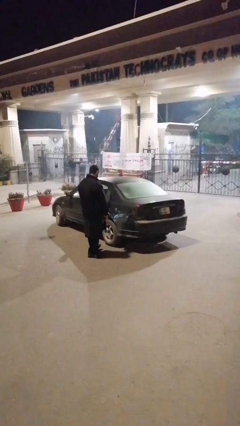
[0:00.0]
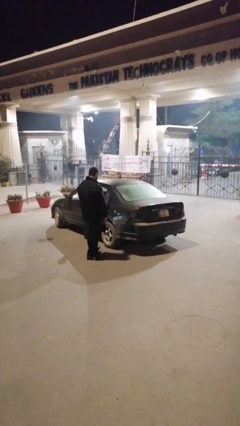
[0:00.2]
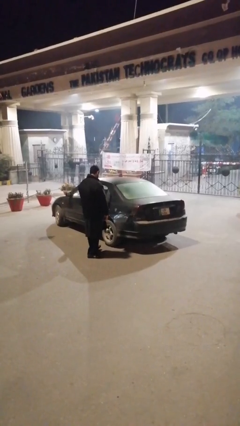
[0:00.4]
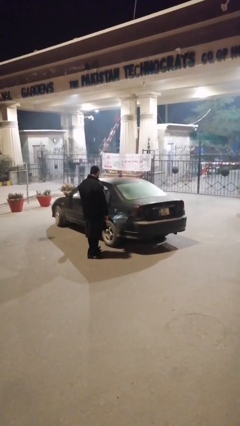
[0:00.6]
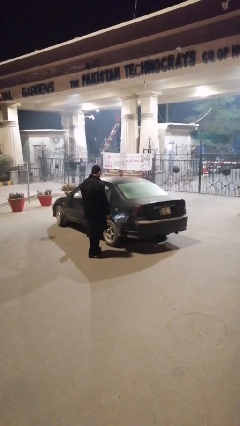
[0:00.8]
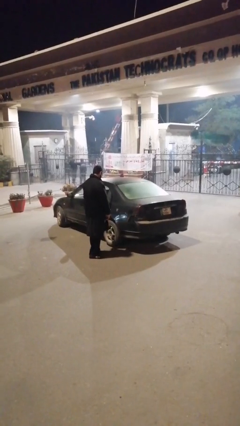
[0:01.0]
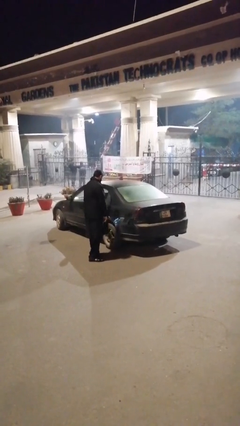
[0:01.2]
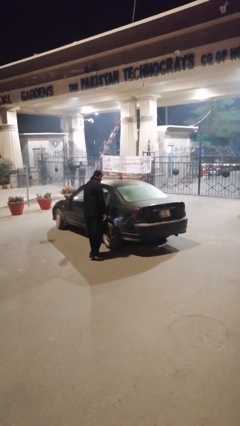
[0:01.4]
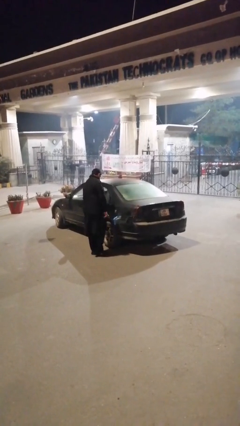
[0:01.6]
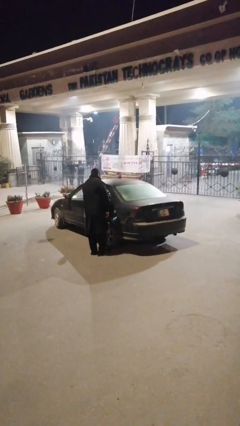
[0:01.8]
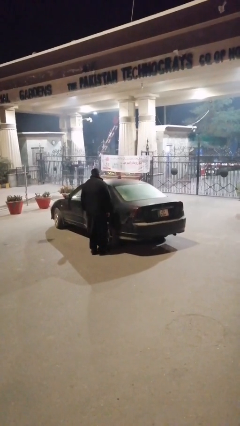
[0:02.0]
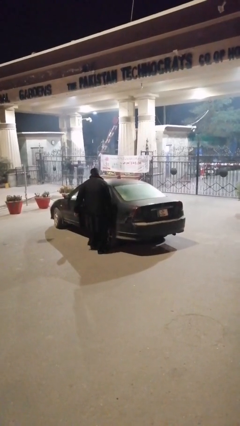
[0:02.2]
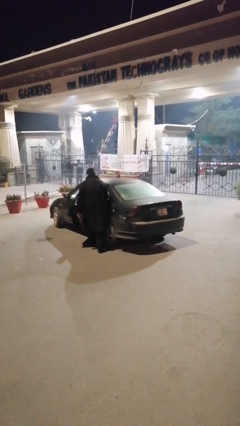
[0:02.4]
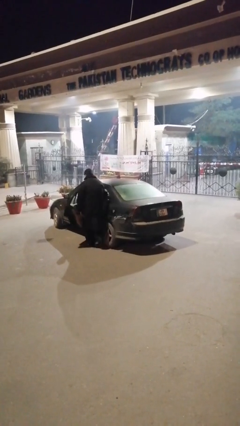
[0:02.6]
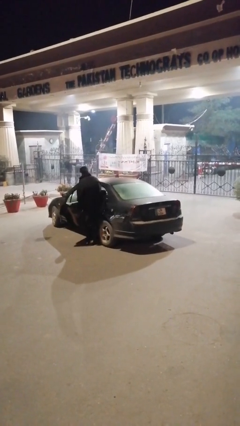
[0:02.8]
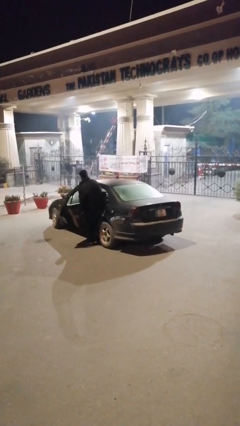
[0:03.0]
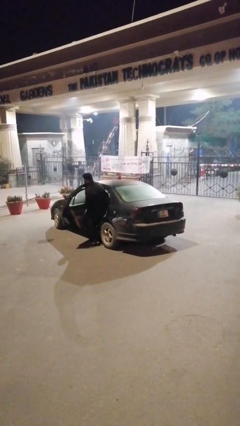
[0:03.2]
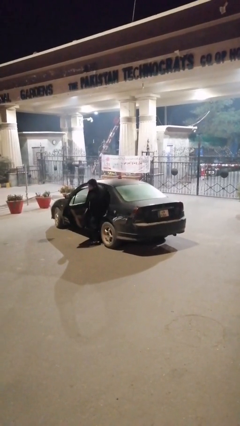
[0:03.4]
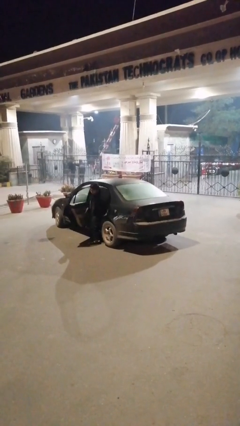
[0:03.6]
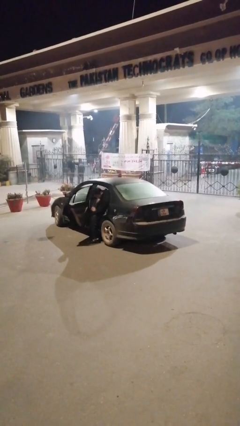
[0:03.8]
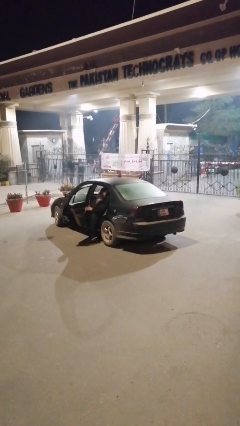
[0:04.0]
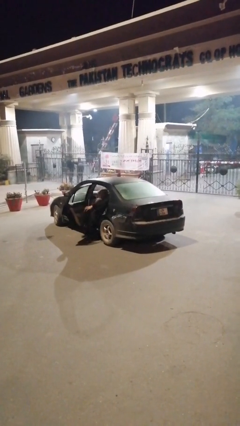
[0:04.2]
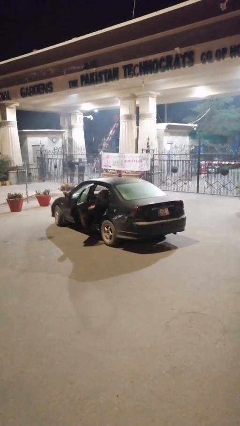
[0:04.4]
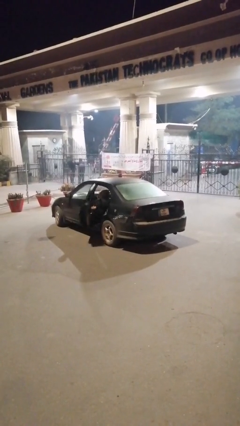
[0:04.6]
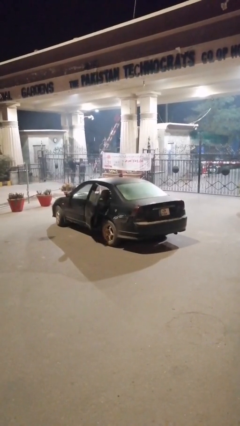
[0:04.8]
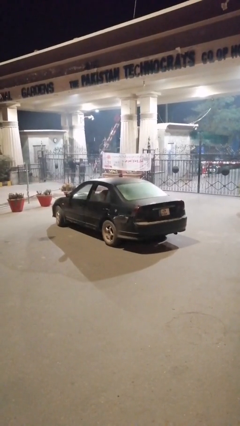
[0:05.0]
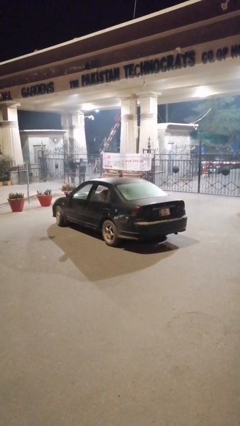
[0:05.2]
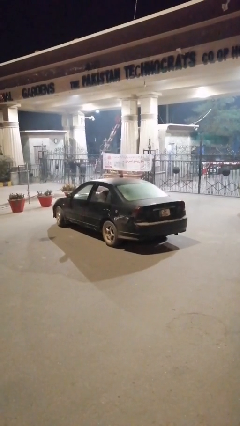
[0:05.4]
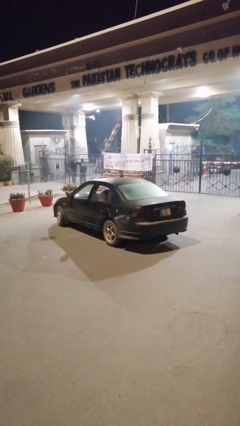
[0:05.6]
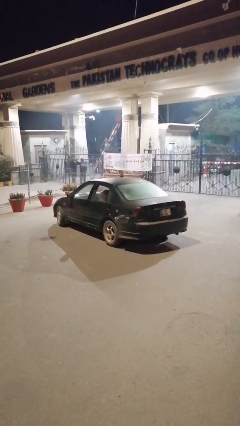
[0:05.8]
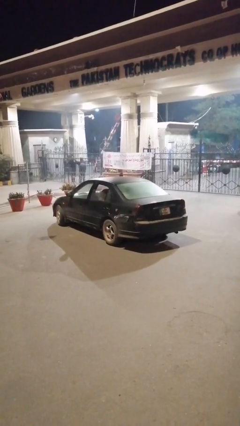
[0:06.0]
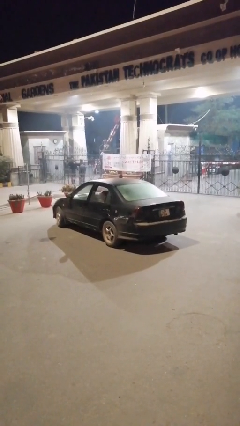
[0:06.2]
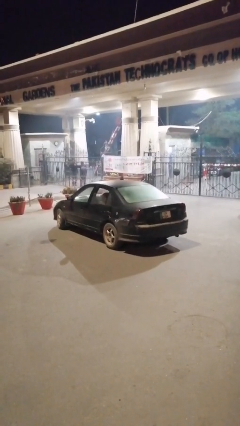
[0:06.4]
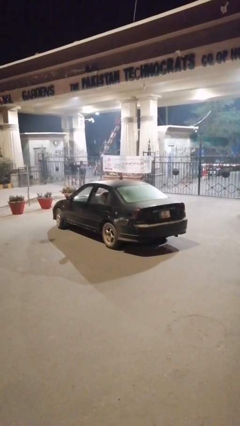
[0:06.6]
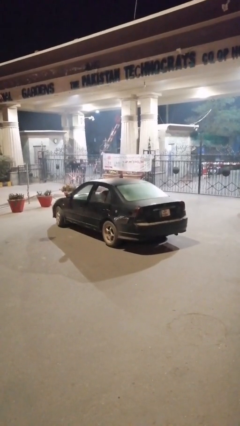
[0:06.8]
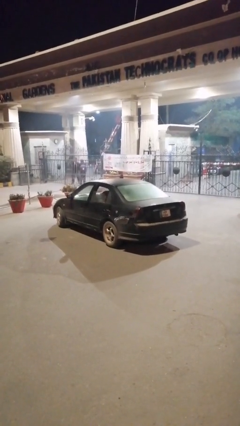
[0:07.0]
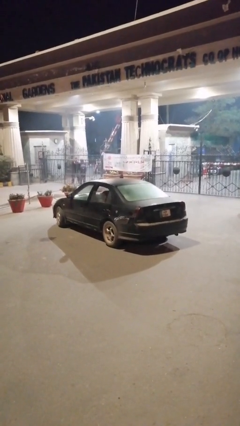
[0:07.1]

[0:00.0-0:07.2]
car picks up person

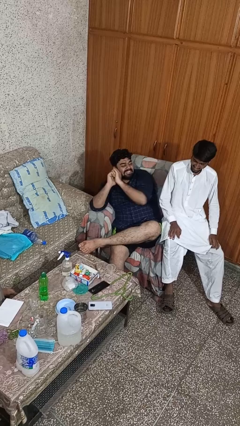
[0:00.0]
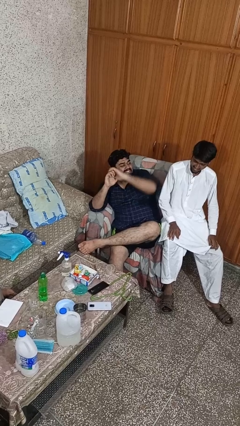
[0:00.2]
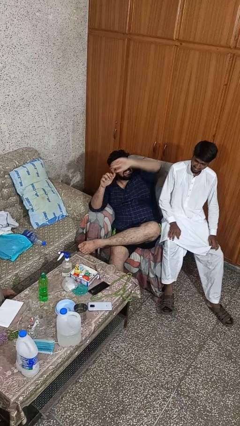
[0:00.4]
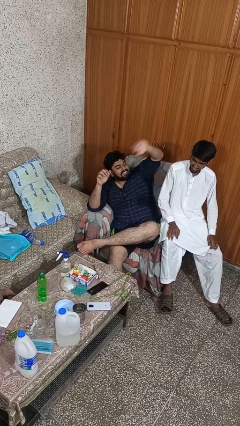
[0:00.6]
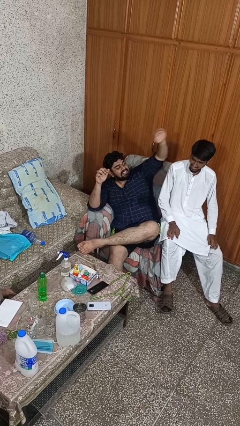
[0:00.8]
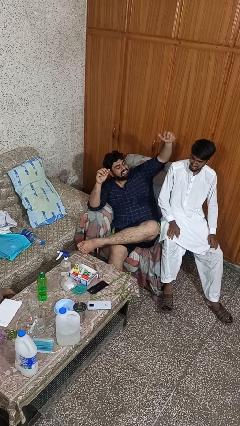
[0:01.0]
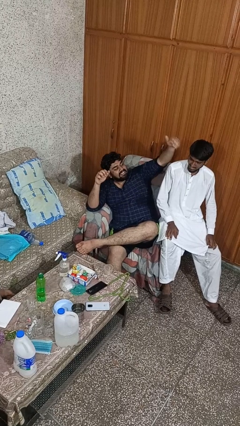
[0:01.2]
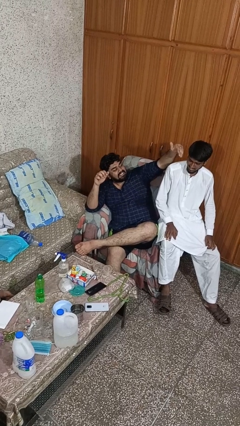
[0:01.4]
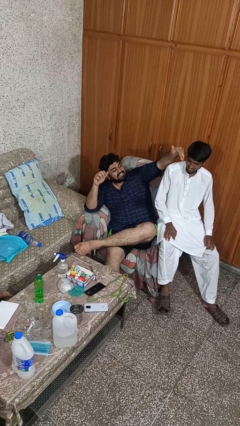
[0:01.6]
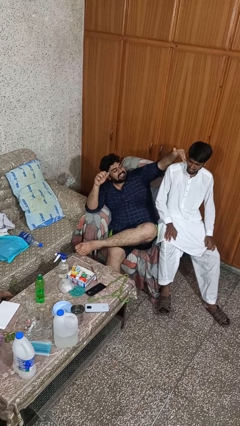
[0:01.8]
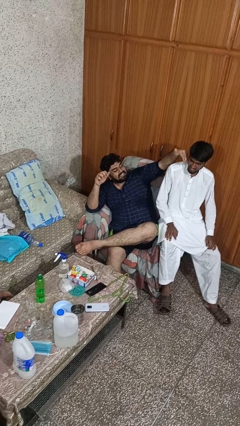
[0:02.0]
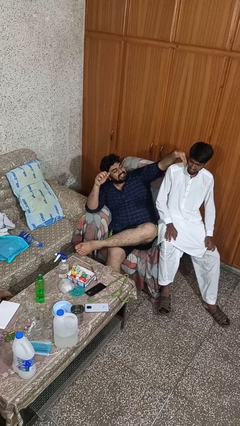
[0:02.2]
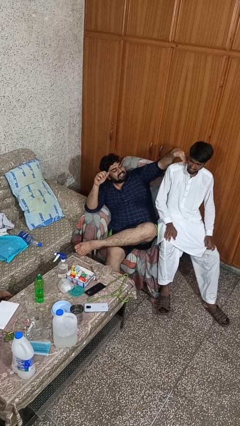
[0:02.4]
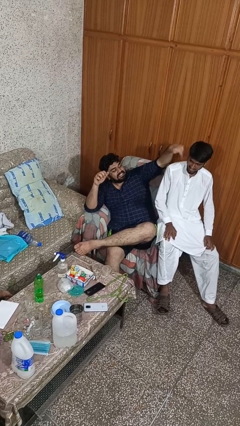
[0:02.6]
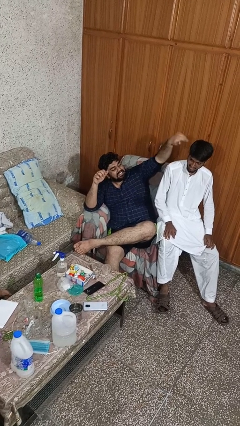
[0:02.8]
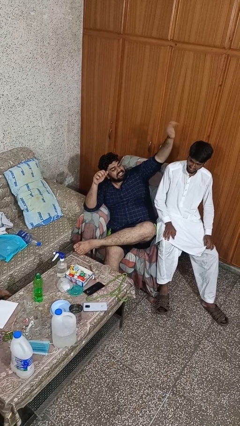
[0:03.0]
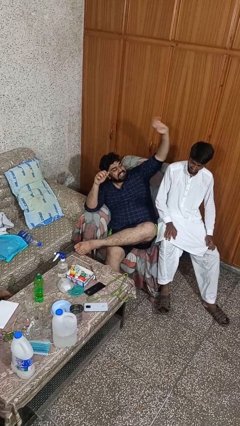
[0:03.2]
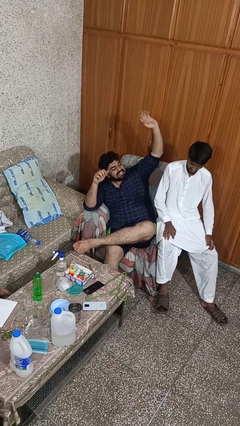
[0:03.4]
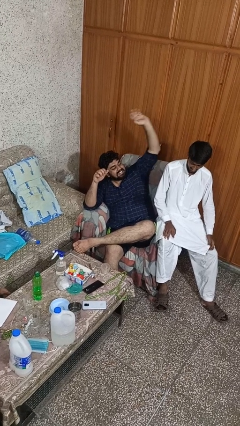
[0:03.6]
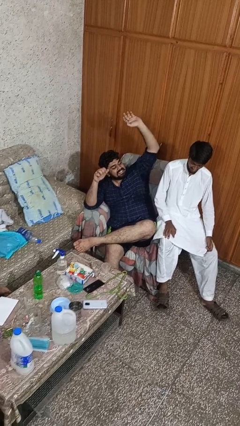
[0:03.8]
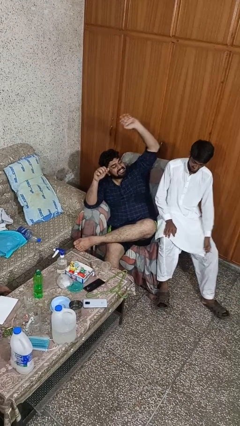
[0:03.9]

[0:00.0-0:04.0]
person touches face of person

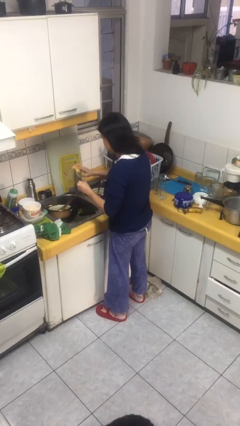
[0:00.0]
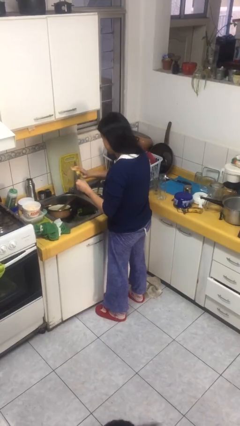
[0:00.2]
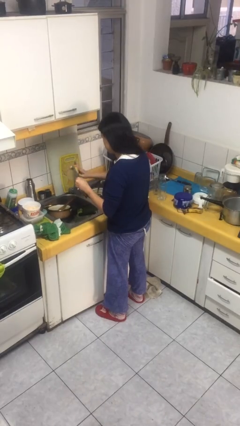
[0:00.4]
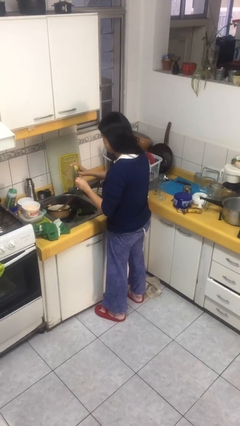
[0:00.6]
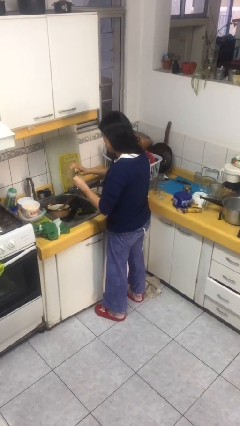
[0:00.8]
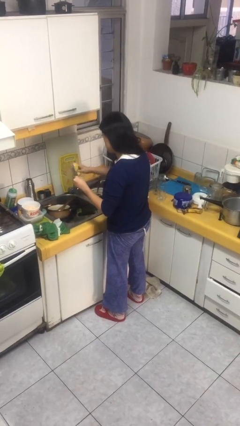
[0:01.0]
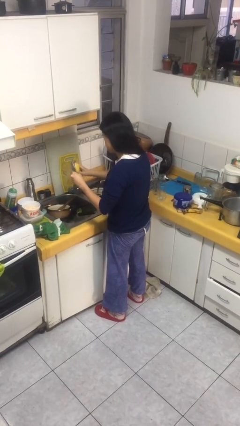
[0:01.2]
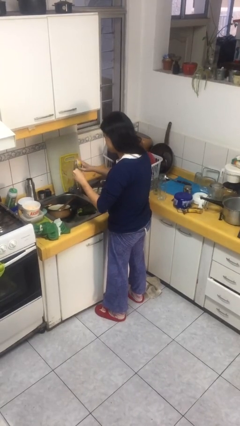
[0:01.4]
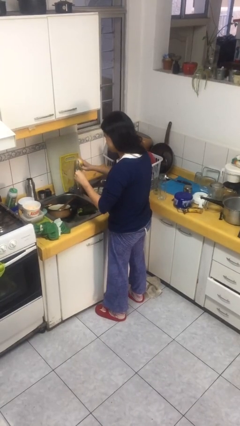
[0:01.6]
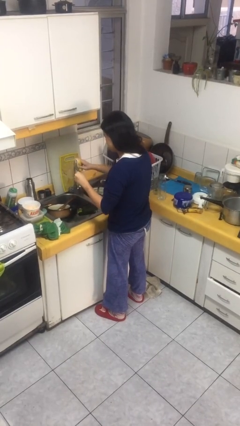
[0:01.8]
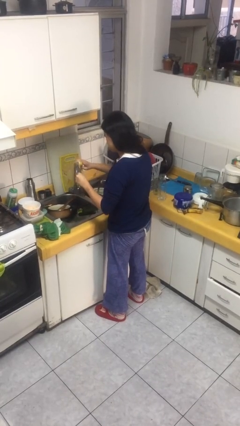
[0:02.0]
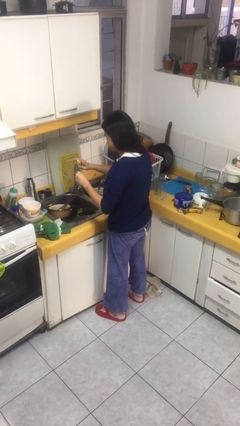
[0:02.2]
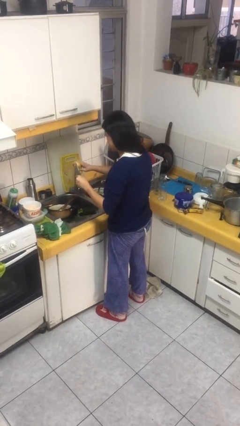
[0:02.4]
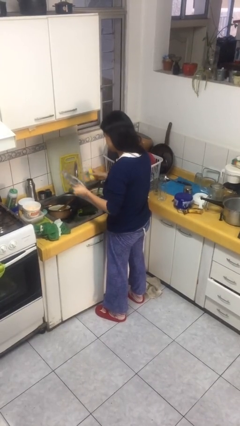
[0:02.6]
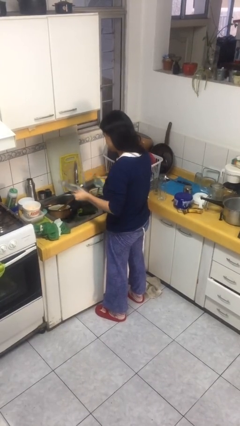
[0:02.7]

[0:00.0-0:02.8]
person washes dish

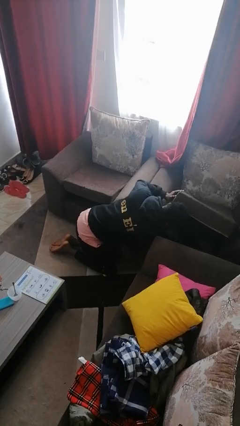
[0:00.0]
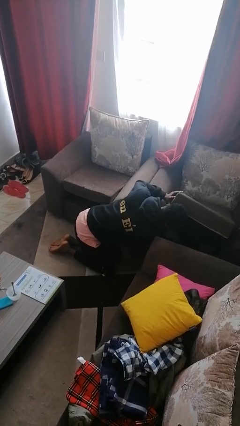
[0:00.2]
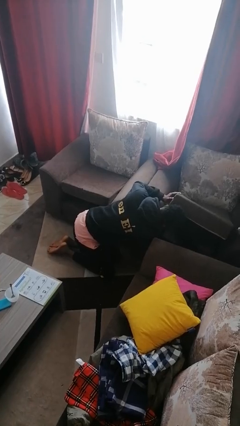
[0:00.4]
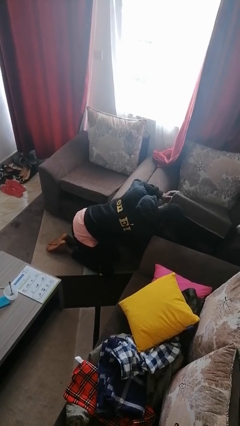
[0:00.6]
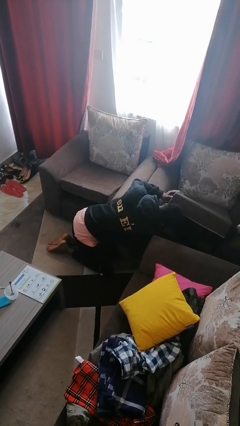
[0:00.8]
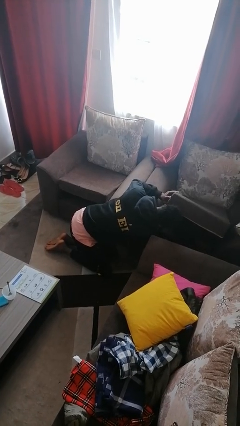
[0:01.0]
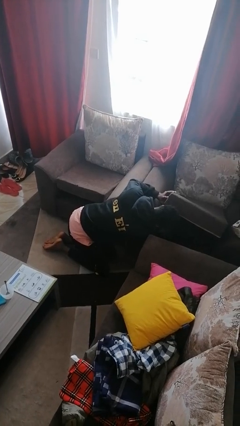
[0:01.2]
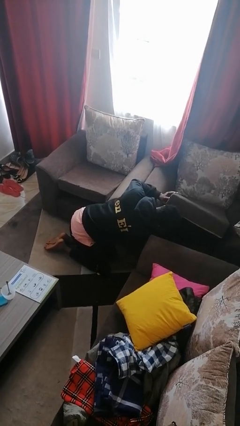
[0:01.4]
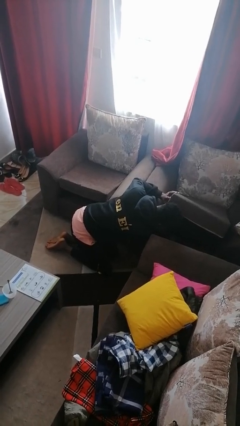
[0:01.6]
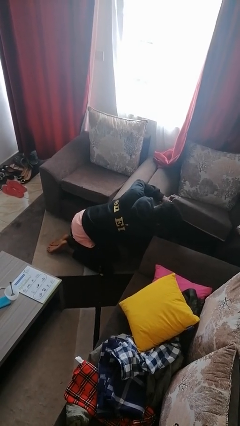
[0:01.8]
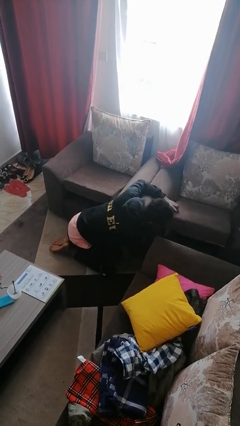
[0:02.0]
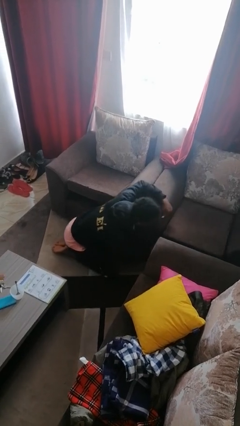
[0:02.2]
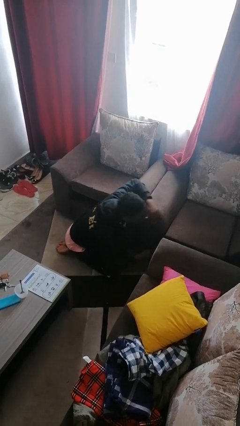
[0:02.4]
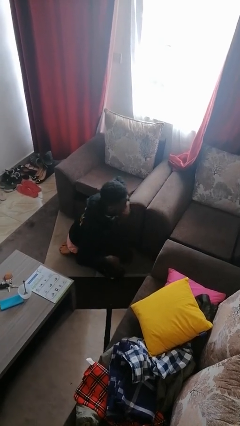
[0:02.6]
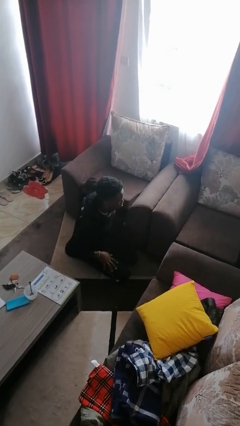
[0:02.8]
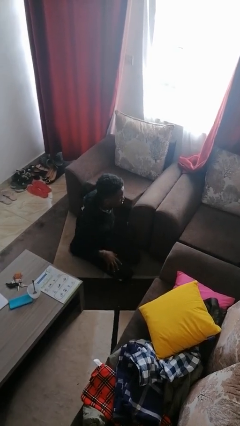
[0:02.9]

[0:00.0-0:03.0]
person searches in couch

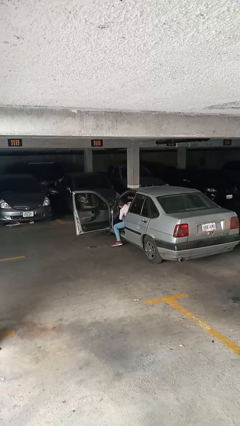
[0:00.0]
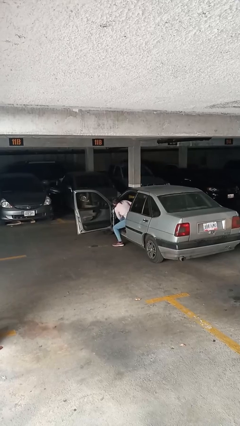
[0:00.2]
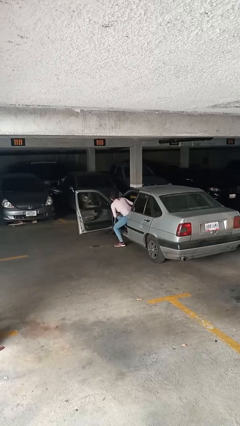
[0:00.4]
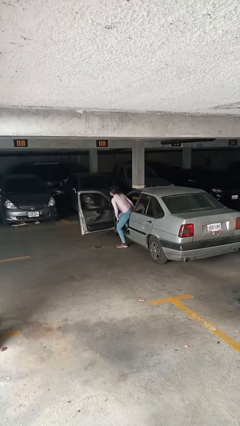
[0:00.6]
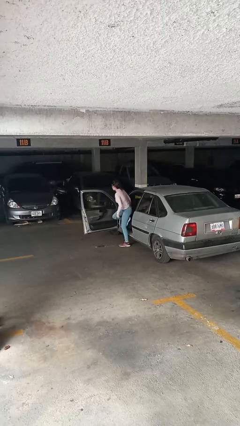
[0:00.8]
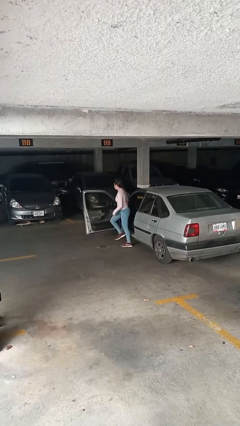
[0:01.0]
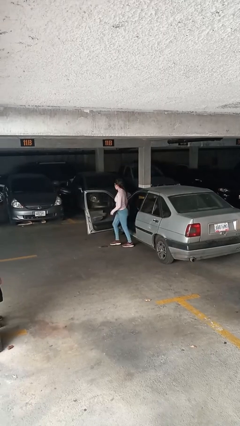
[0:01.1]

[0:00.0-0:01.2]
person exits car
